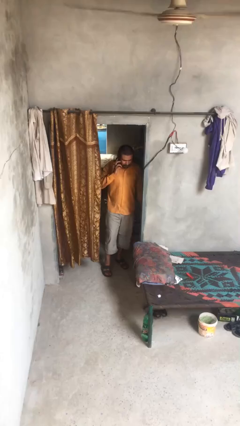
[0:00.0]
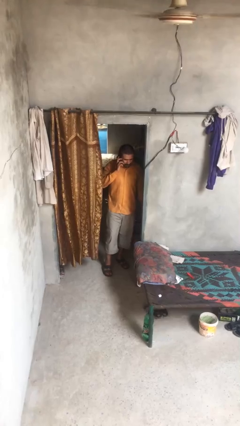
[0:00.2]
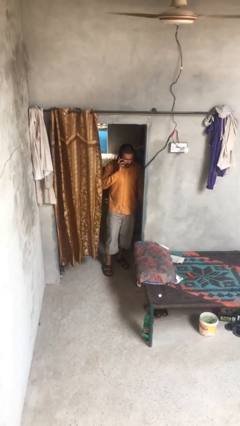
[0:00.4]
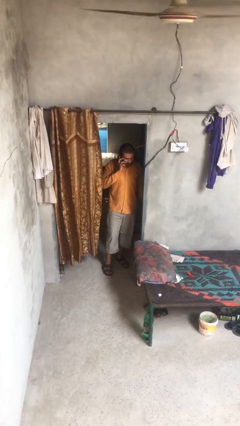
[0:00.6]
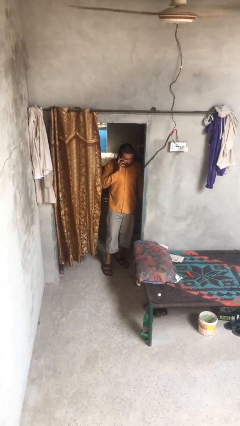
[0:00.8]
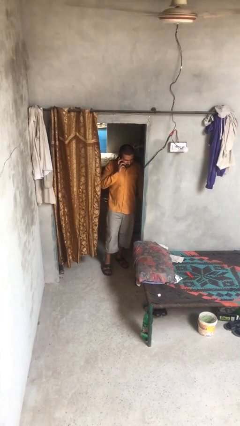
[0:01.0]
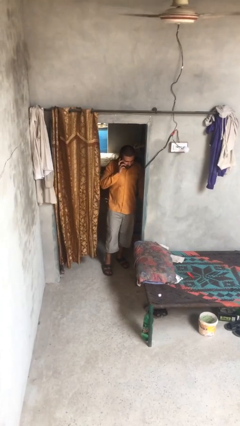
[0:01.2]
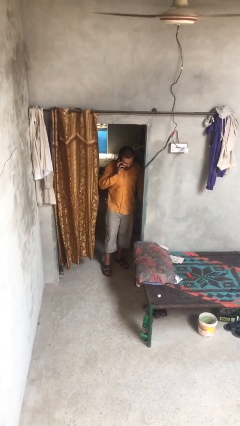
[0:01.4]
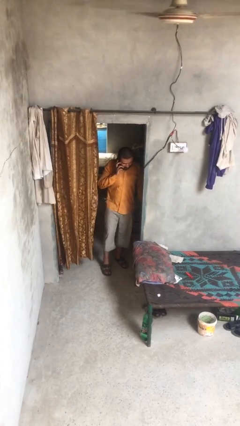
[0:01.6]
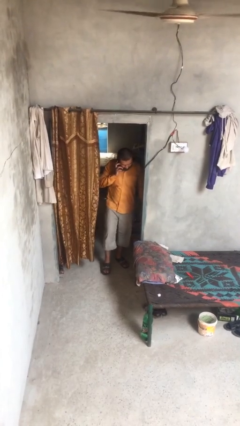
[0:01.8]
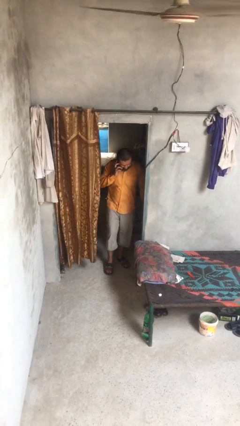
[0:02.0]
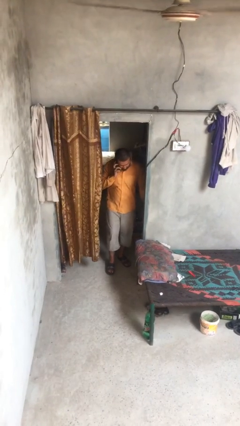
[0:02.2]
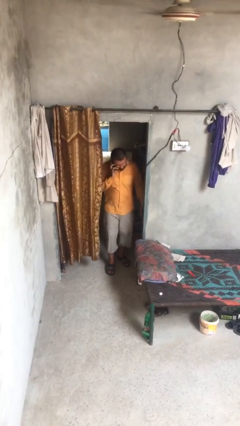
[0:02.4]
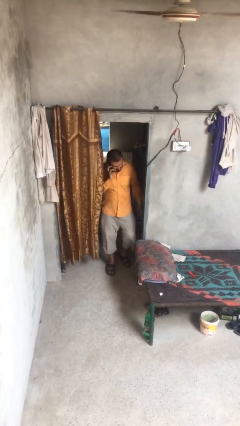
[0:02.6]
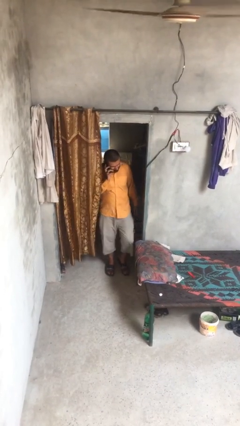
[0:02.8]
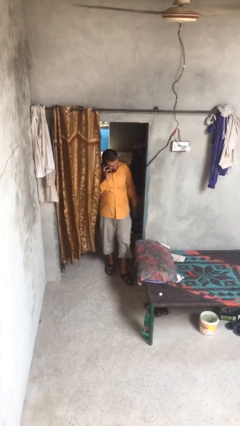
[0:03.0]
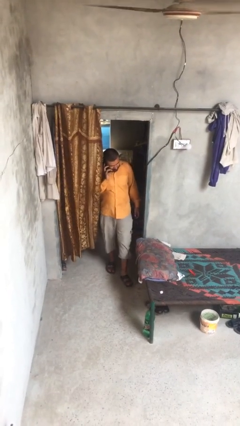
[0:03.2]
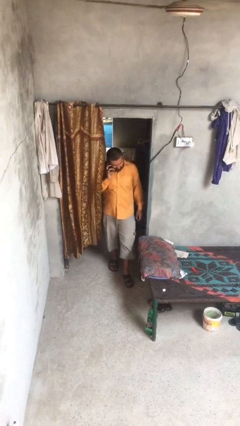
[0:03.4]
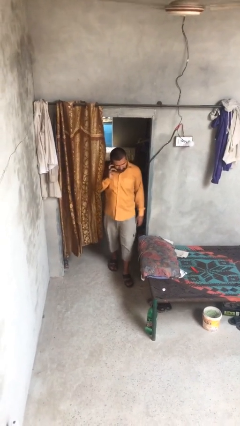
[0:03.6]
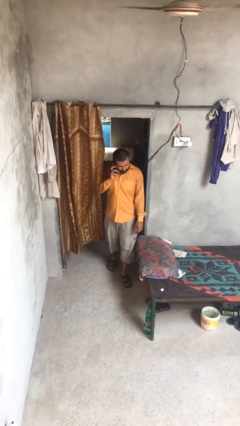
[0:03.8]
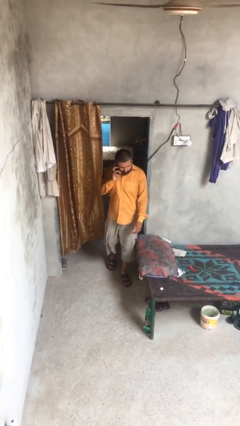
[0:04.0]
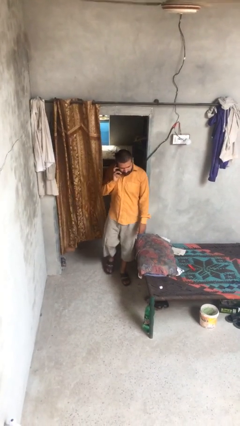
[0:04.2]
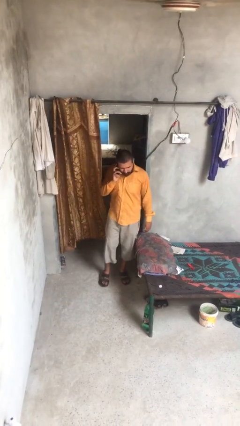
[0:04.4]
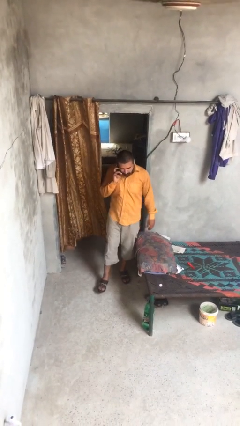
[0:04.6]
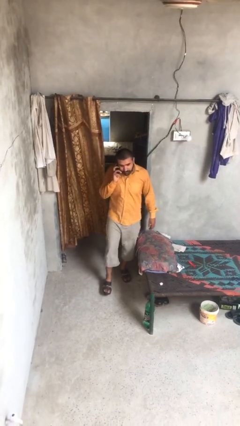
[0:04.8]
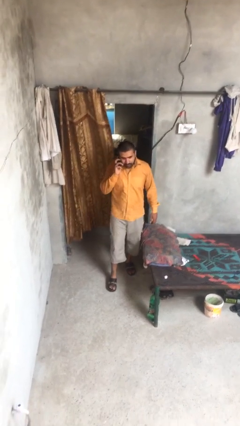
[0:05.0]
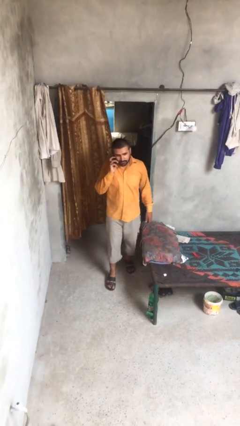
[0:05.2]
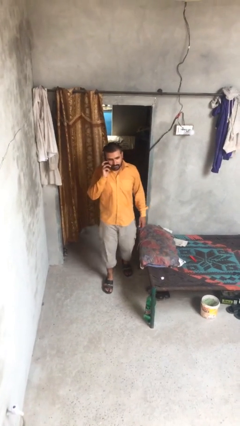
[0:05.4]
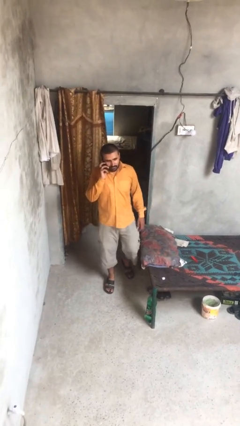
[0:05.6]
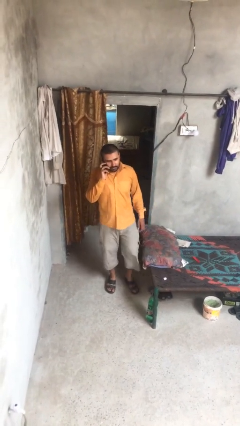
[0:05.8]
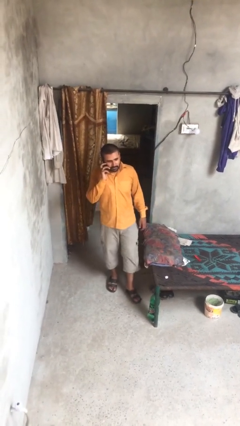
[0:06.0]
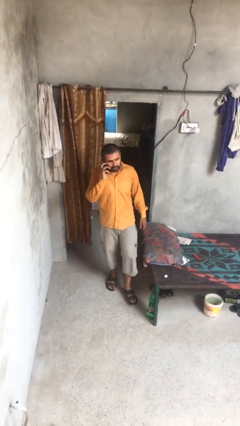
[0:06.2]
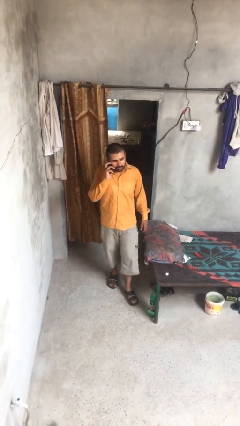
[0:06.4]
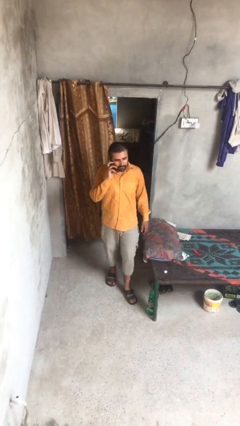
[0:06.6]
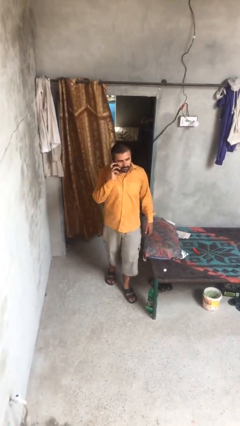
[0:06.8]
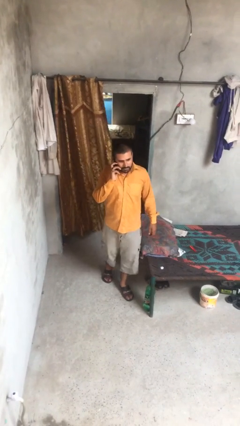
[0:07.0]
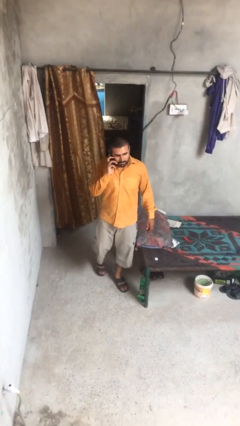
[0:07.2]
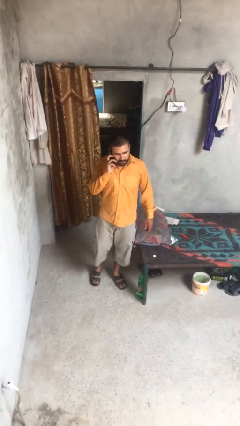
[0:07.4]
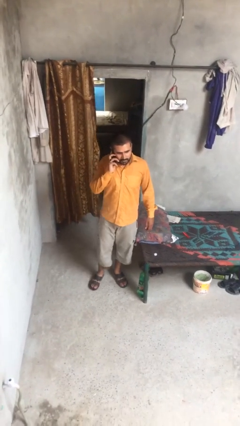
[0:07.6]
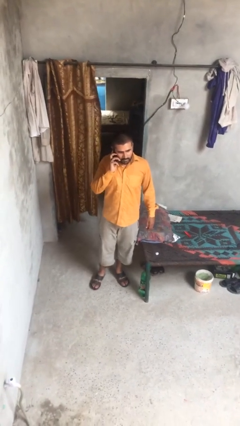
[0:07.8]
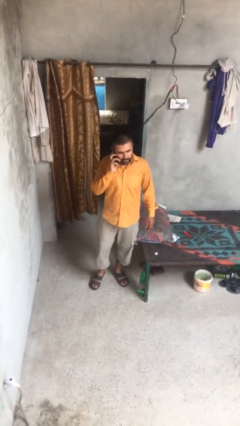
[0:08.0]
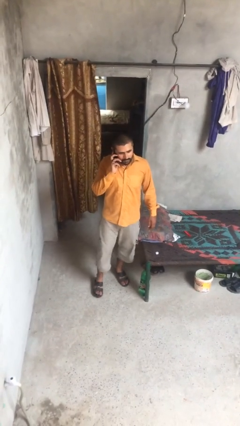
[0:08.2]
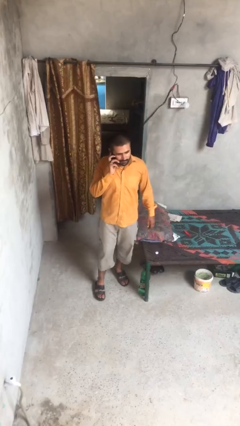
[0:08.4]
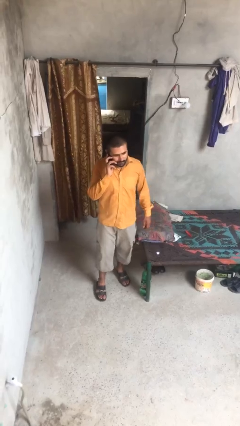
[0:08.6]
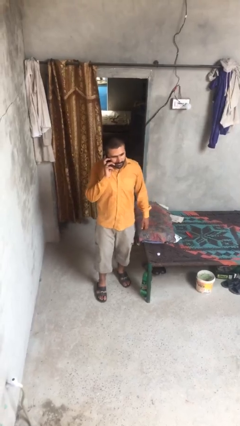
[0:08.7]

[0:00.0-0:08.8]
person enters scene through structure

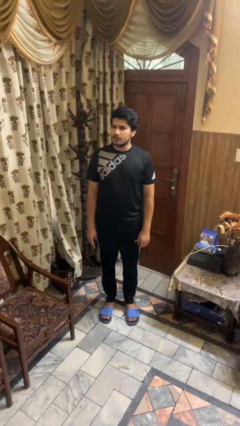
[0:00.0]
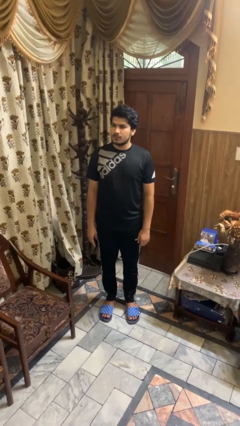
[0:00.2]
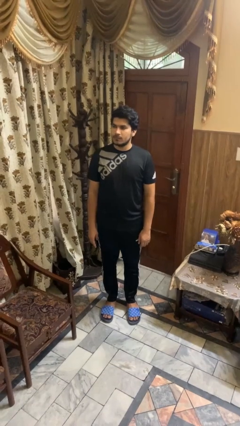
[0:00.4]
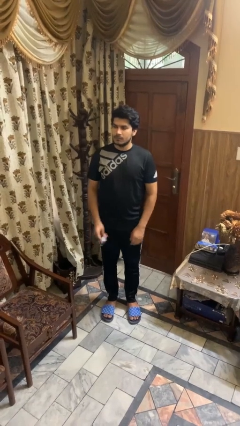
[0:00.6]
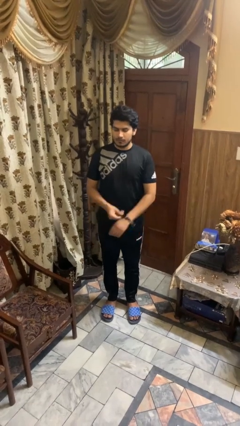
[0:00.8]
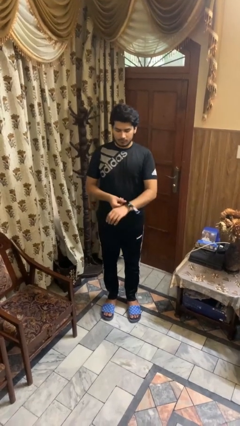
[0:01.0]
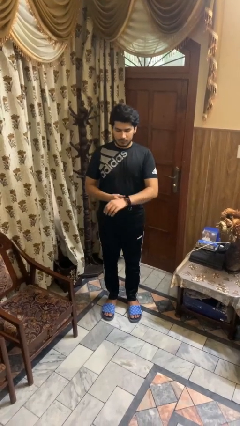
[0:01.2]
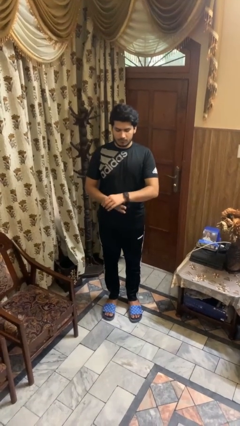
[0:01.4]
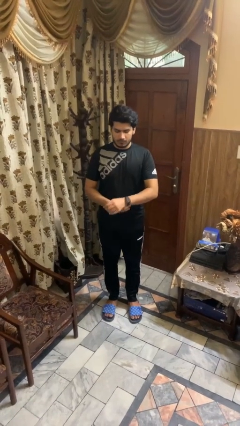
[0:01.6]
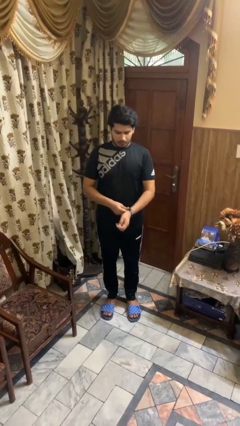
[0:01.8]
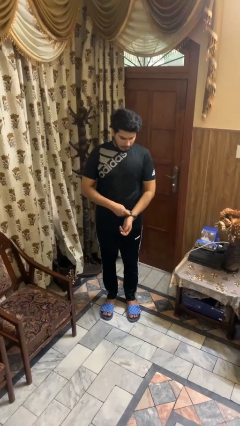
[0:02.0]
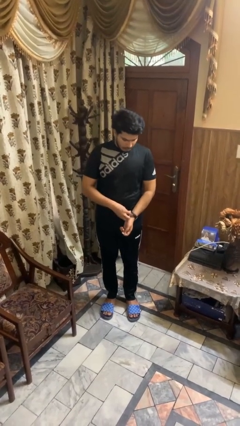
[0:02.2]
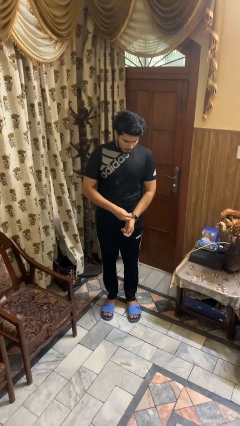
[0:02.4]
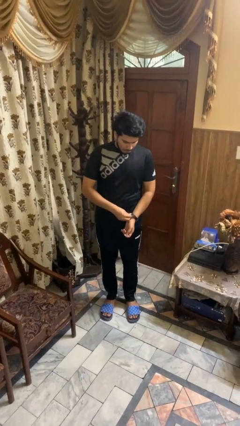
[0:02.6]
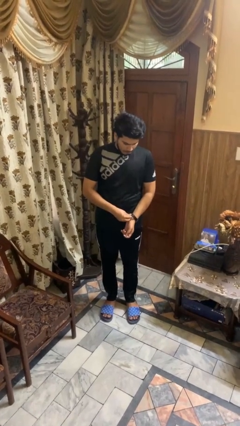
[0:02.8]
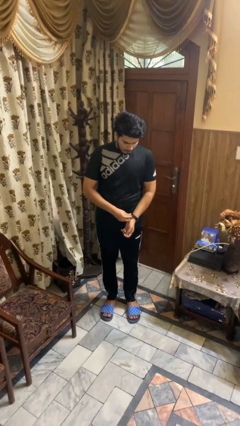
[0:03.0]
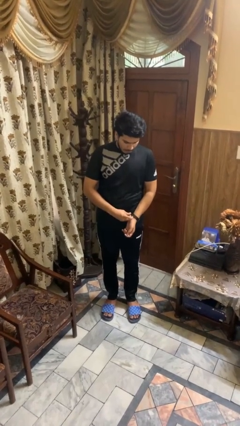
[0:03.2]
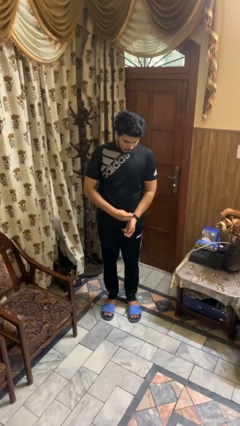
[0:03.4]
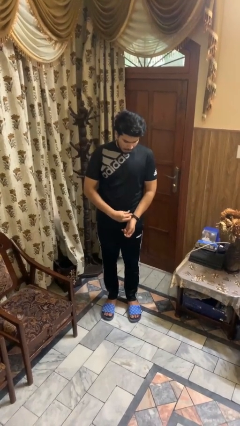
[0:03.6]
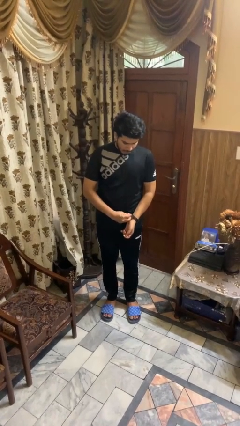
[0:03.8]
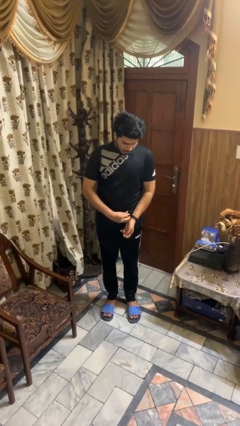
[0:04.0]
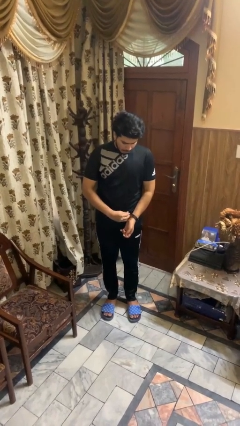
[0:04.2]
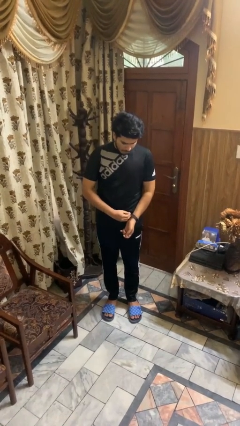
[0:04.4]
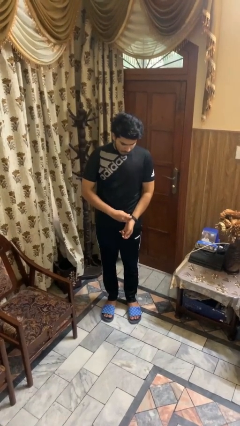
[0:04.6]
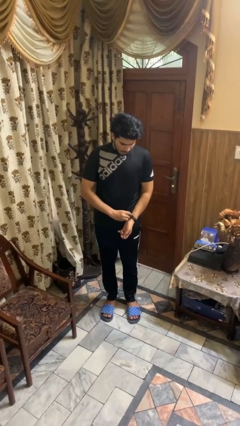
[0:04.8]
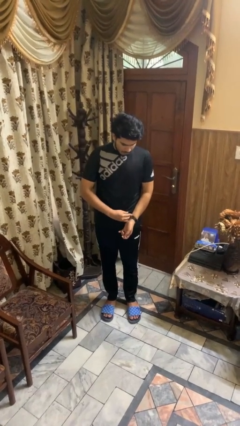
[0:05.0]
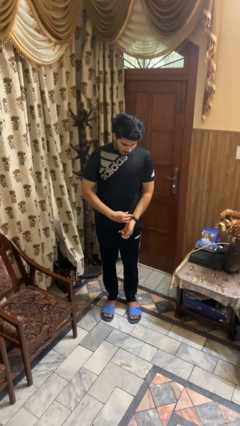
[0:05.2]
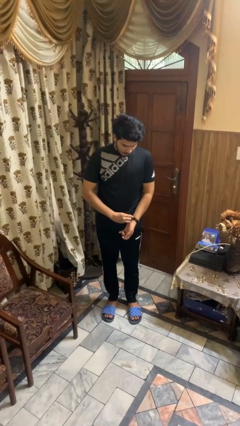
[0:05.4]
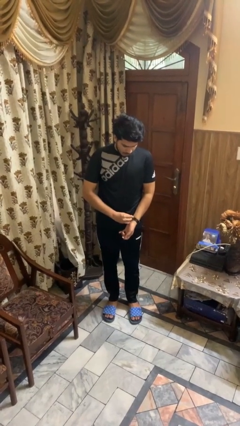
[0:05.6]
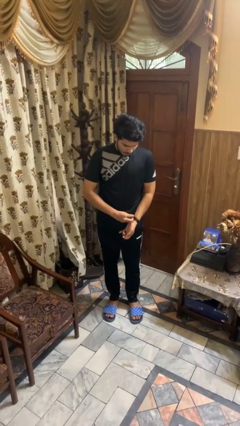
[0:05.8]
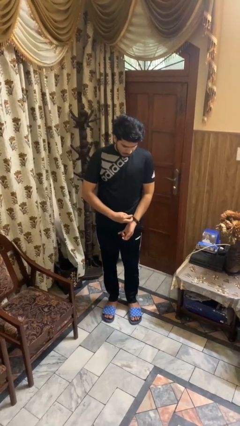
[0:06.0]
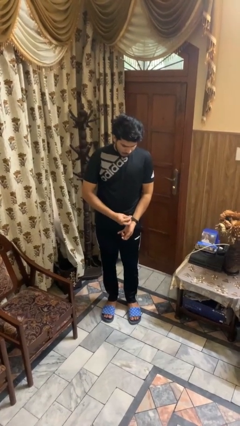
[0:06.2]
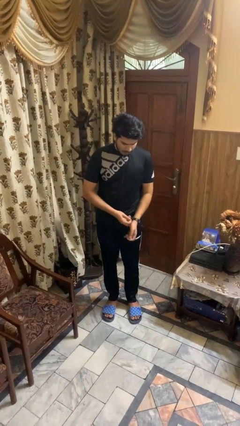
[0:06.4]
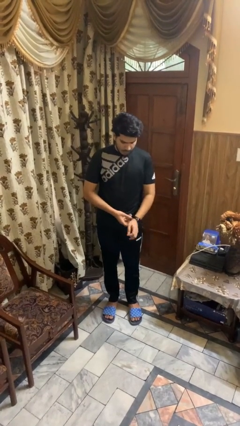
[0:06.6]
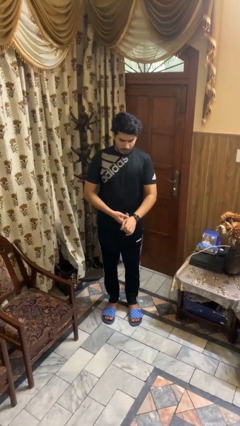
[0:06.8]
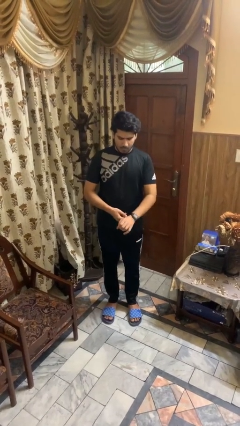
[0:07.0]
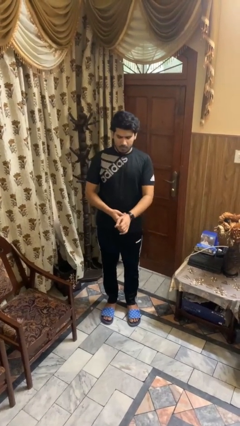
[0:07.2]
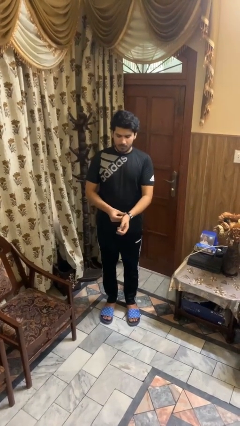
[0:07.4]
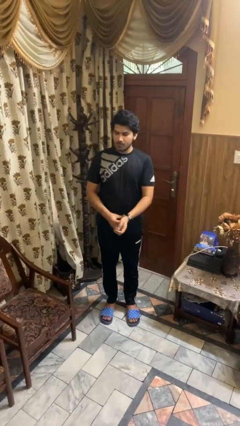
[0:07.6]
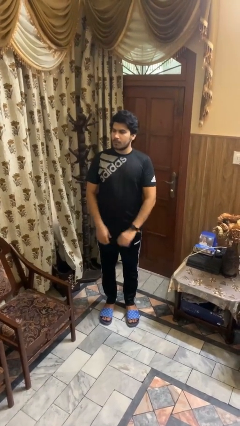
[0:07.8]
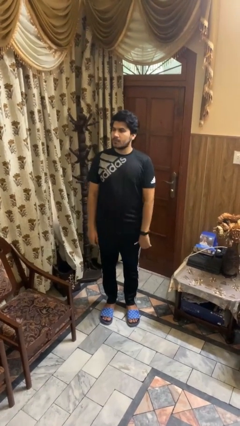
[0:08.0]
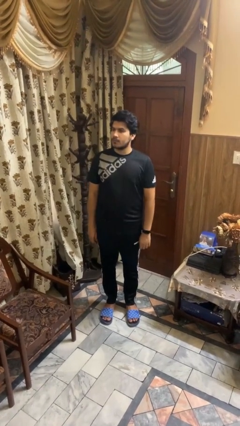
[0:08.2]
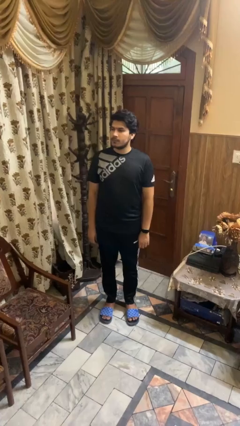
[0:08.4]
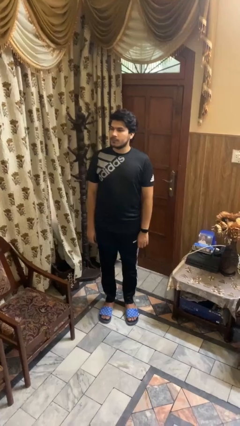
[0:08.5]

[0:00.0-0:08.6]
person puts on wristwatch

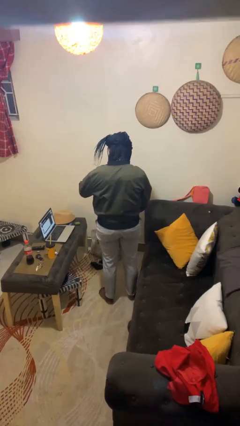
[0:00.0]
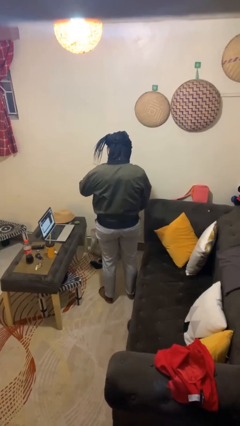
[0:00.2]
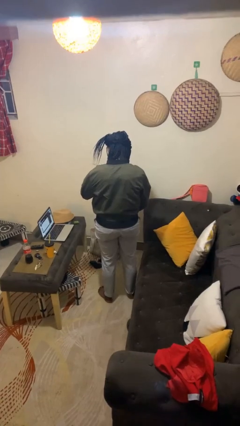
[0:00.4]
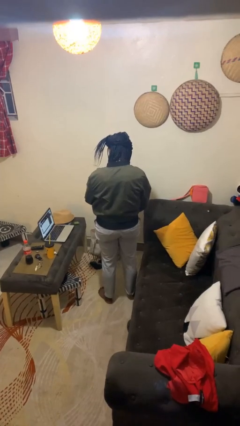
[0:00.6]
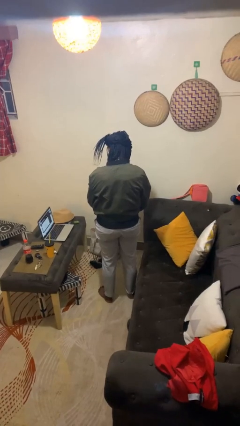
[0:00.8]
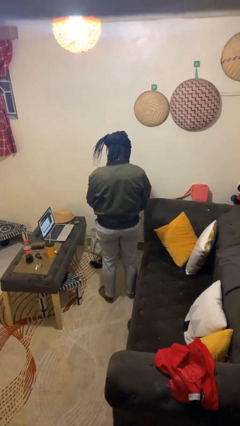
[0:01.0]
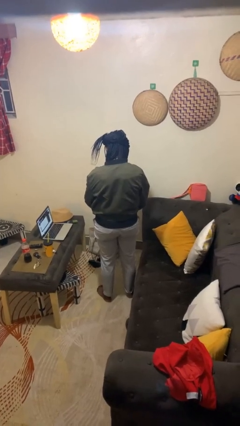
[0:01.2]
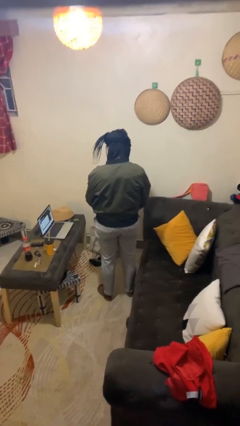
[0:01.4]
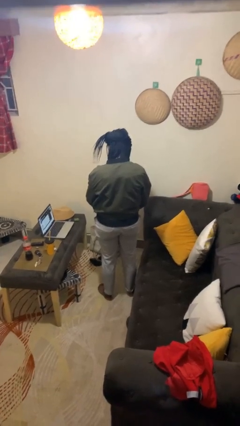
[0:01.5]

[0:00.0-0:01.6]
person unzips jacket
